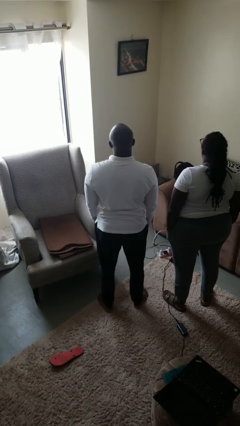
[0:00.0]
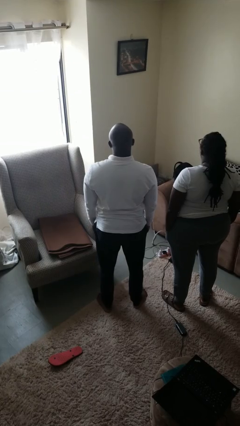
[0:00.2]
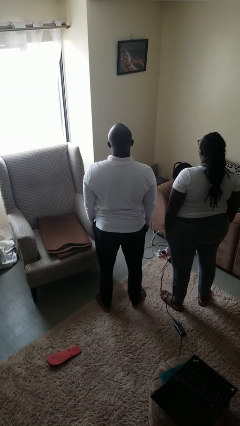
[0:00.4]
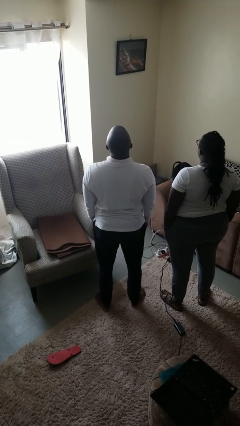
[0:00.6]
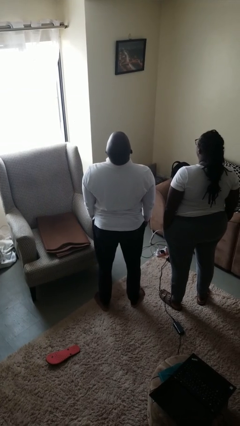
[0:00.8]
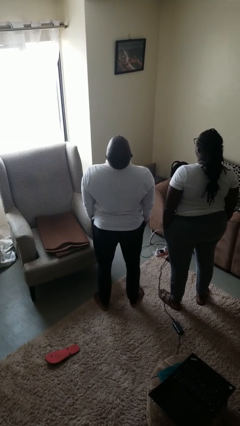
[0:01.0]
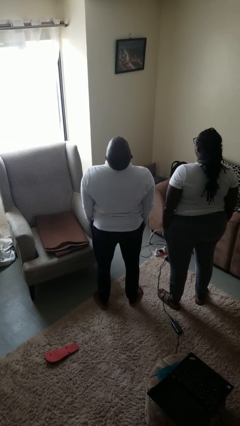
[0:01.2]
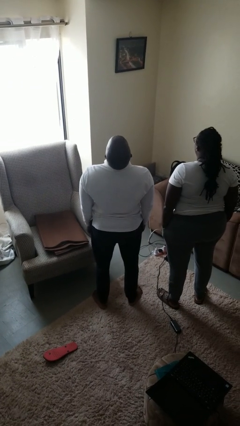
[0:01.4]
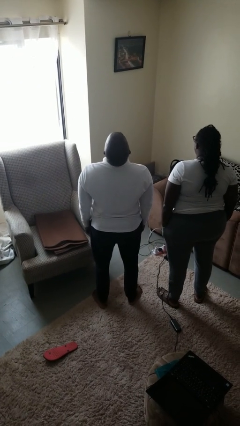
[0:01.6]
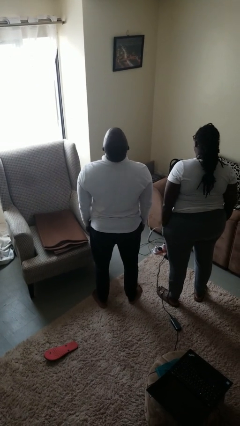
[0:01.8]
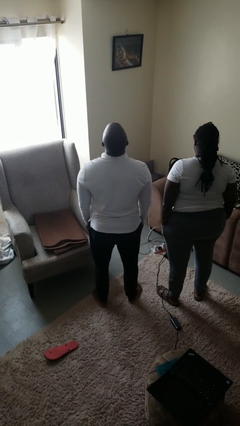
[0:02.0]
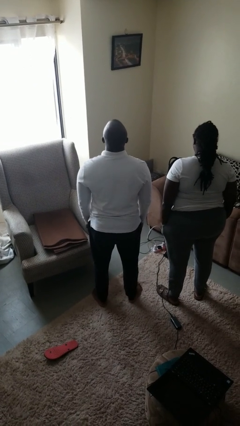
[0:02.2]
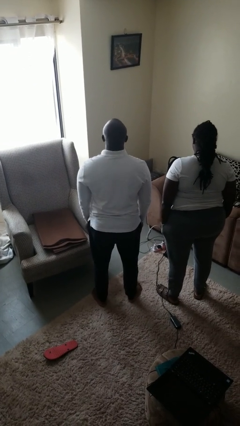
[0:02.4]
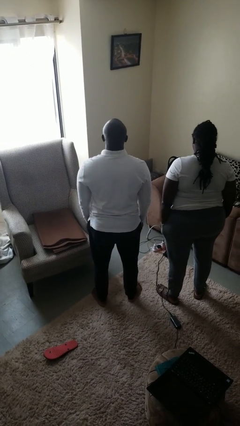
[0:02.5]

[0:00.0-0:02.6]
person laughs with person

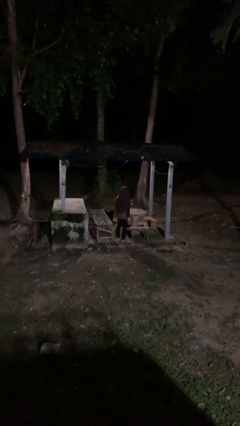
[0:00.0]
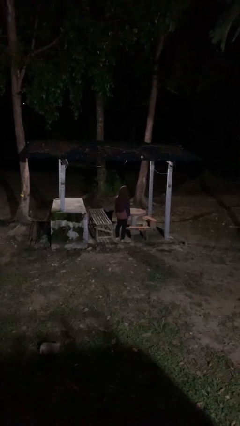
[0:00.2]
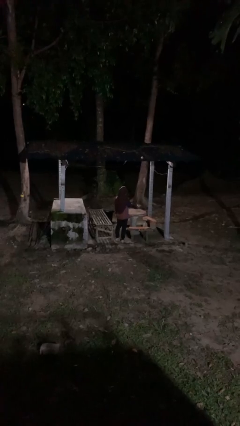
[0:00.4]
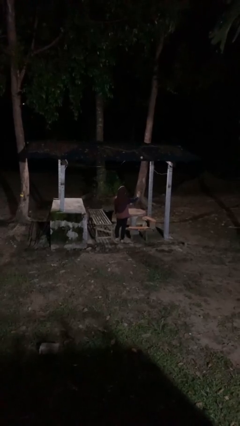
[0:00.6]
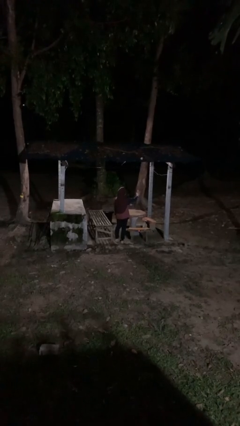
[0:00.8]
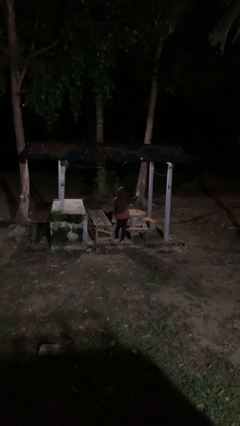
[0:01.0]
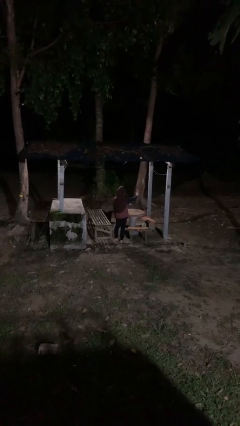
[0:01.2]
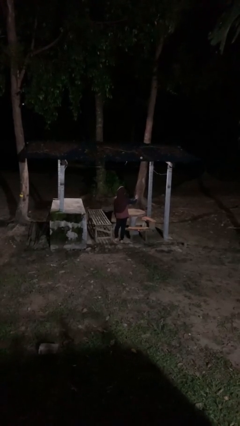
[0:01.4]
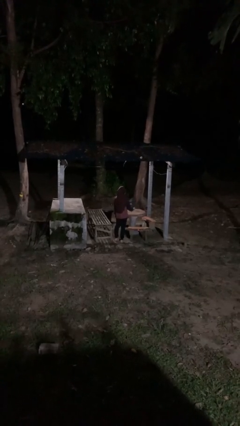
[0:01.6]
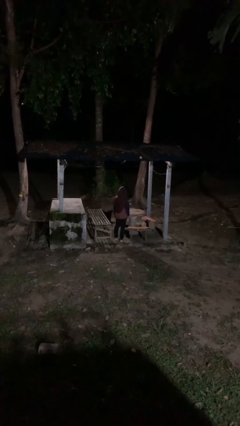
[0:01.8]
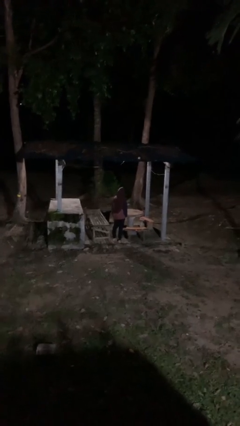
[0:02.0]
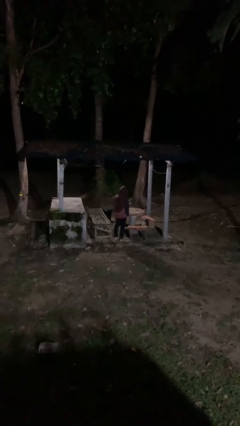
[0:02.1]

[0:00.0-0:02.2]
person gestures stop

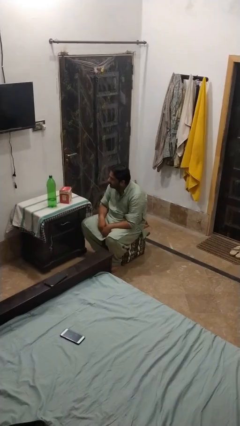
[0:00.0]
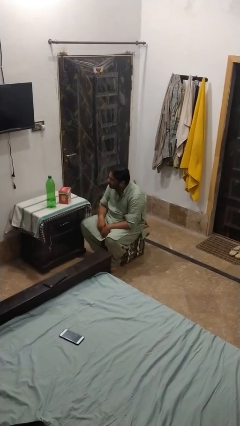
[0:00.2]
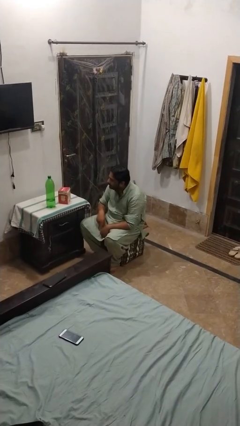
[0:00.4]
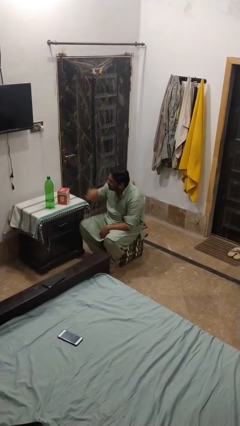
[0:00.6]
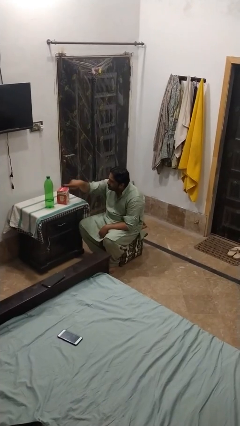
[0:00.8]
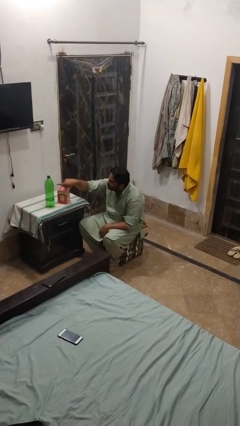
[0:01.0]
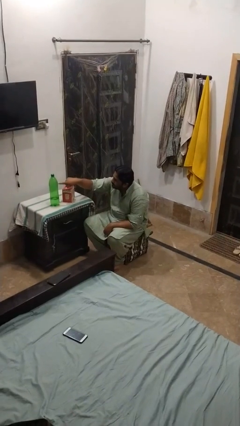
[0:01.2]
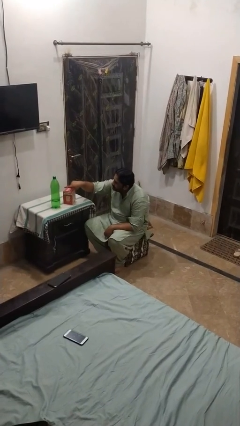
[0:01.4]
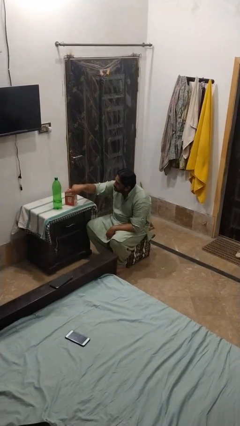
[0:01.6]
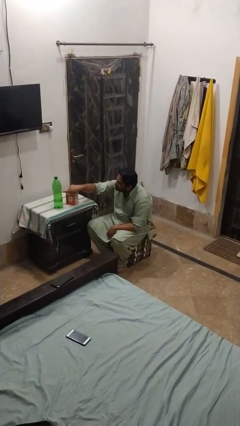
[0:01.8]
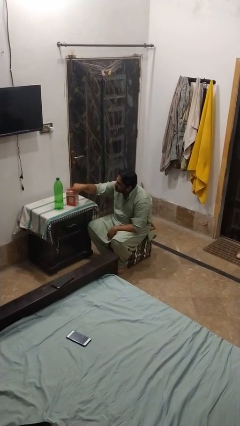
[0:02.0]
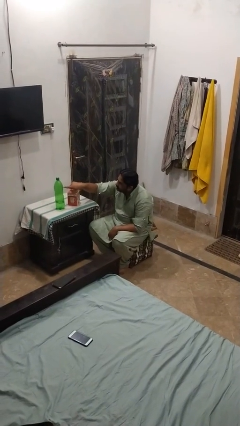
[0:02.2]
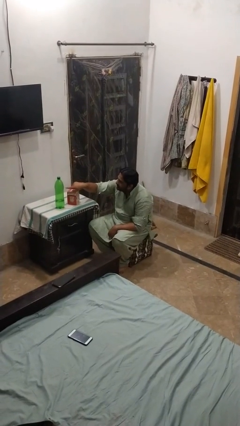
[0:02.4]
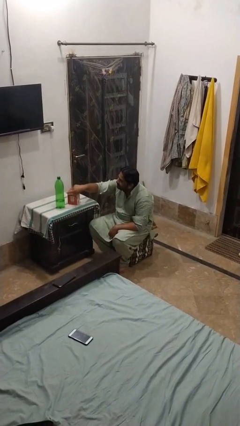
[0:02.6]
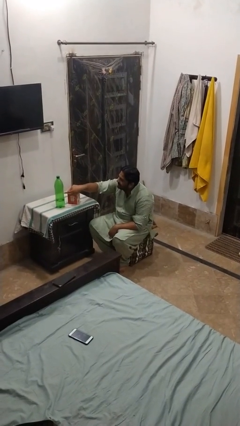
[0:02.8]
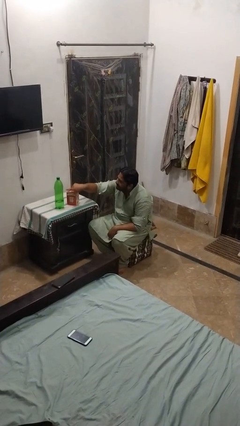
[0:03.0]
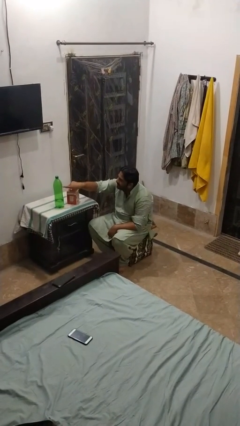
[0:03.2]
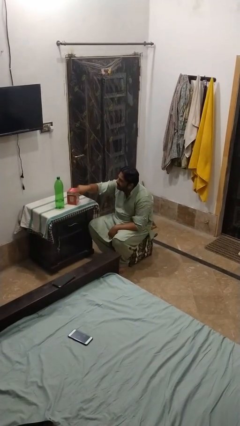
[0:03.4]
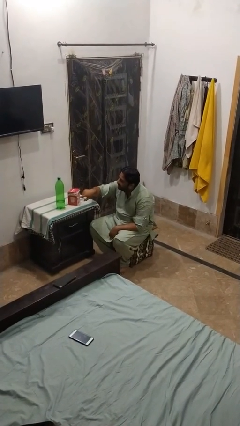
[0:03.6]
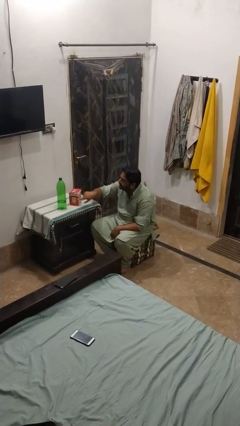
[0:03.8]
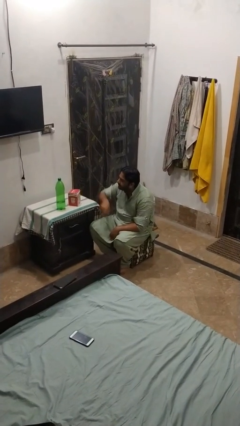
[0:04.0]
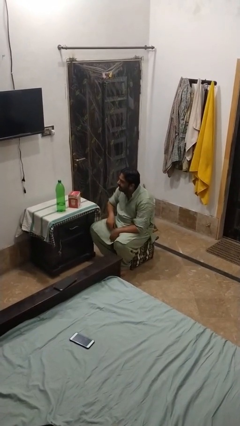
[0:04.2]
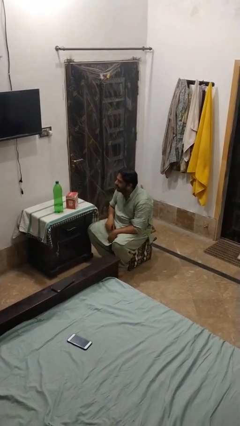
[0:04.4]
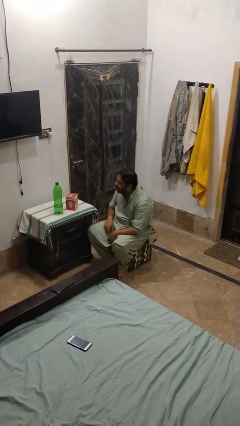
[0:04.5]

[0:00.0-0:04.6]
person taps object with finger

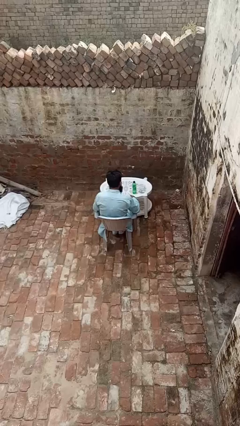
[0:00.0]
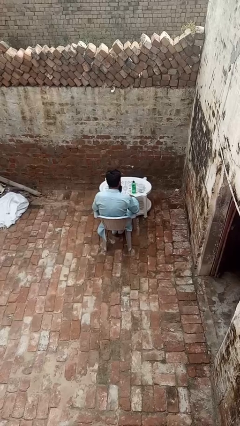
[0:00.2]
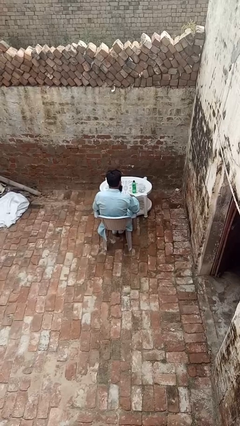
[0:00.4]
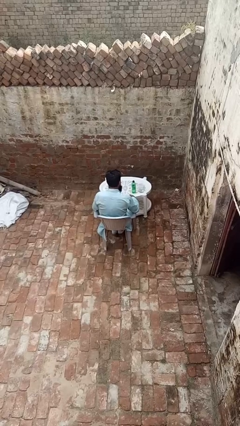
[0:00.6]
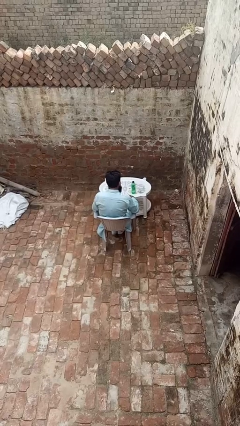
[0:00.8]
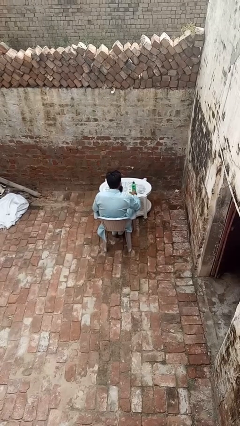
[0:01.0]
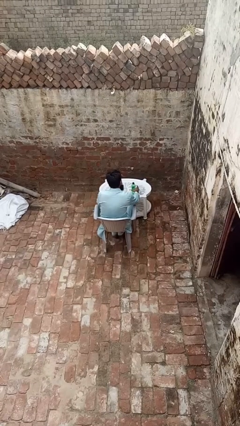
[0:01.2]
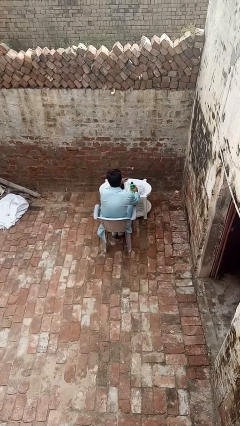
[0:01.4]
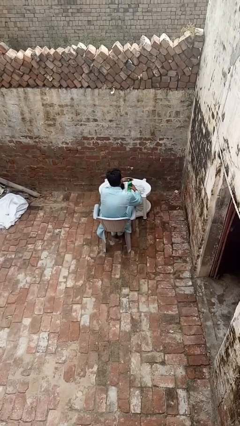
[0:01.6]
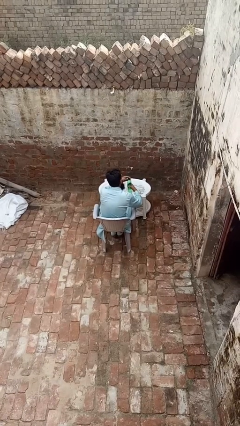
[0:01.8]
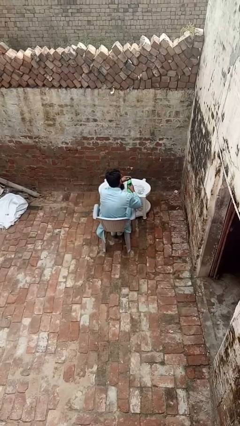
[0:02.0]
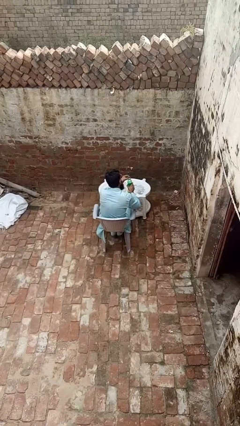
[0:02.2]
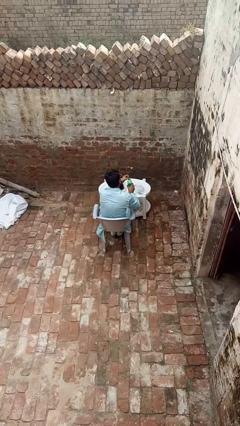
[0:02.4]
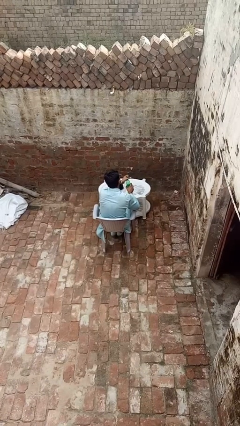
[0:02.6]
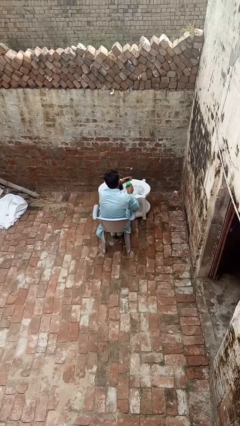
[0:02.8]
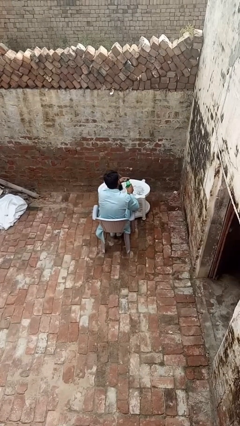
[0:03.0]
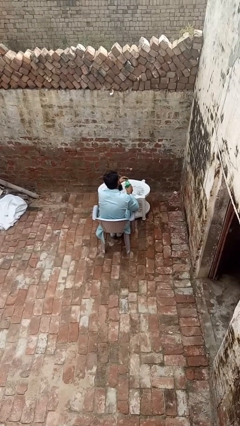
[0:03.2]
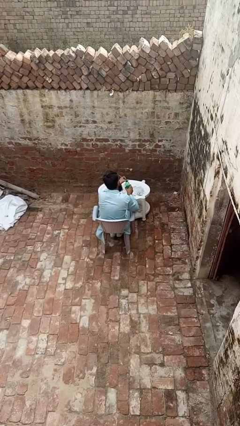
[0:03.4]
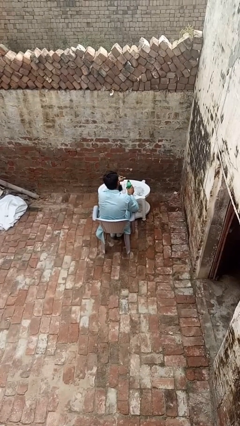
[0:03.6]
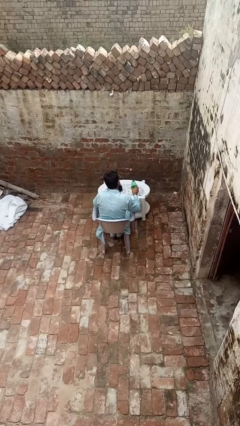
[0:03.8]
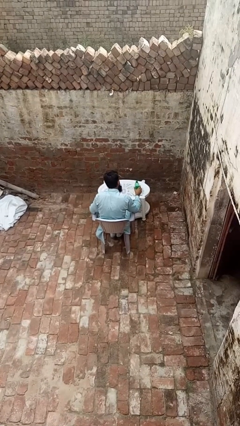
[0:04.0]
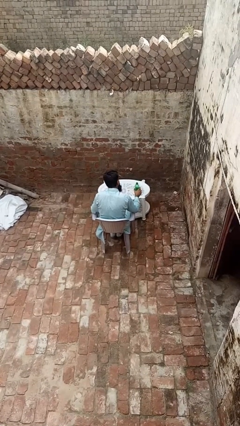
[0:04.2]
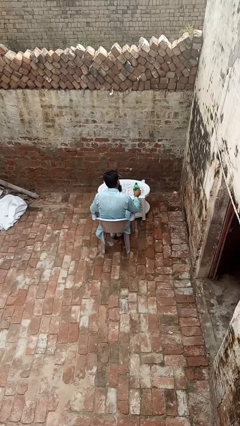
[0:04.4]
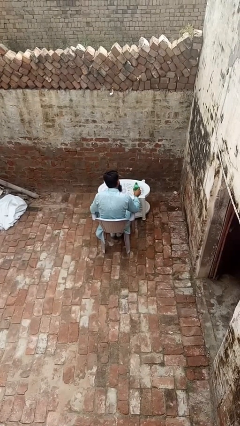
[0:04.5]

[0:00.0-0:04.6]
person unscrews lid from bottle

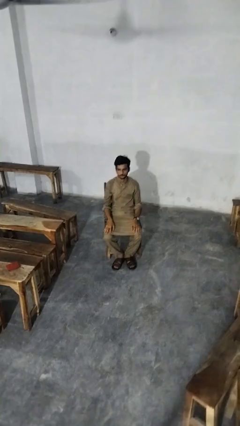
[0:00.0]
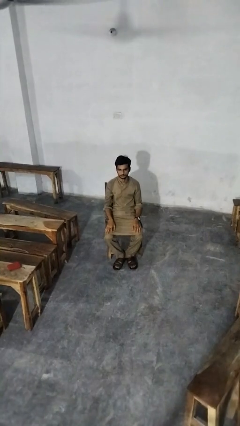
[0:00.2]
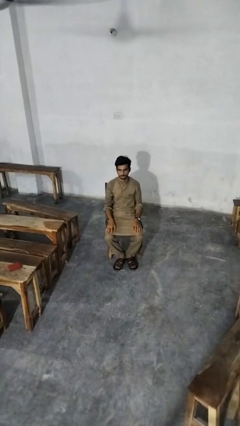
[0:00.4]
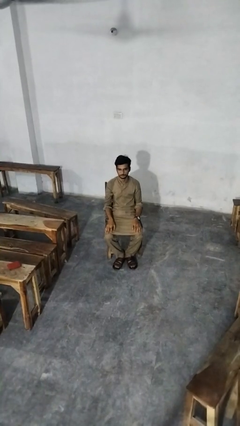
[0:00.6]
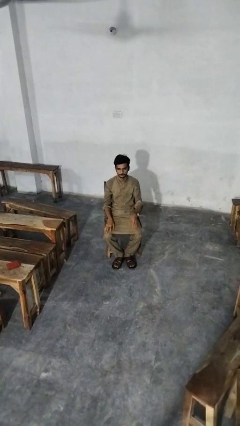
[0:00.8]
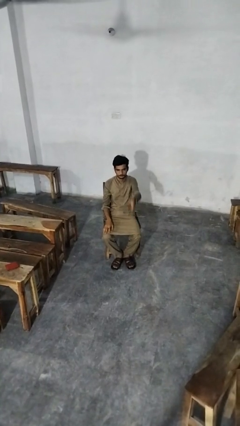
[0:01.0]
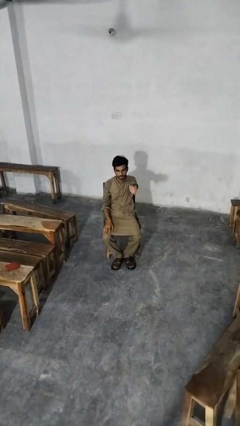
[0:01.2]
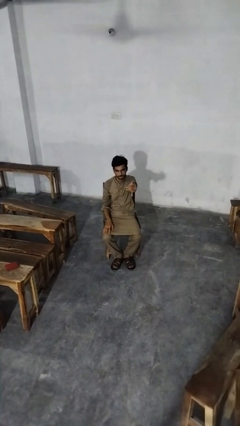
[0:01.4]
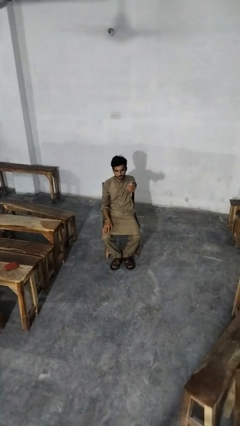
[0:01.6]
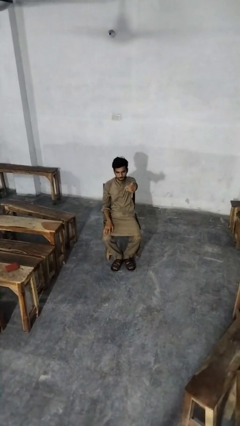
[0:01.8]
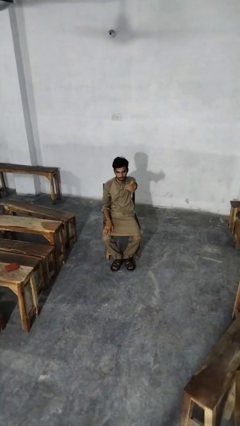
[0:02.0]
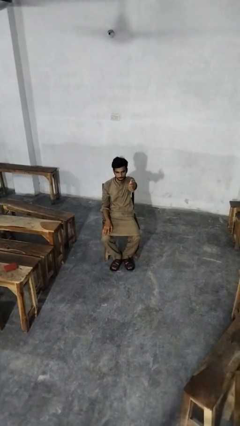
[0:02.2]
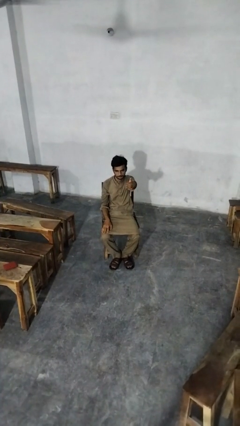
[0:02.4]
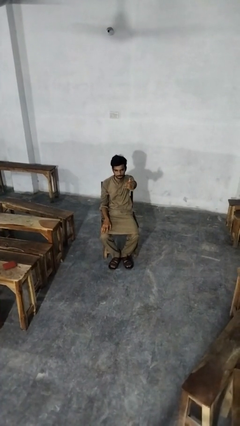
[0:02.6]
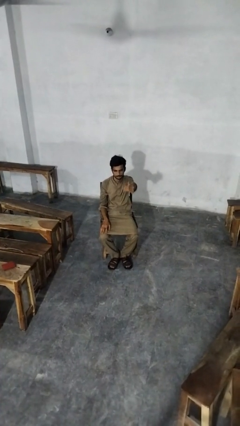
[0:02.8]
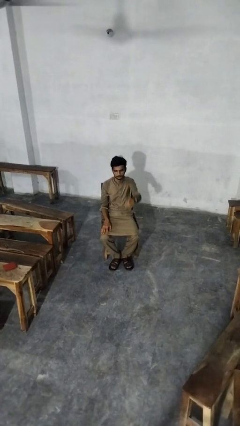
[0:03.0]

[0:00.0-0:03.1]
person gestures come here

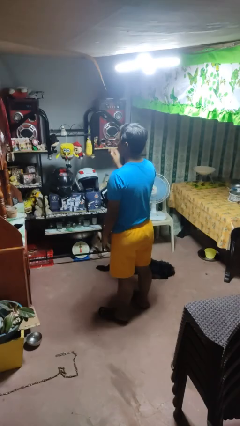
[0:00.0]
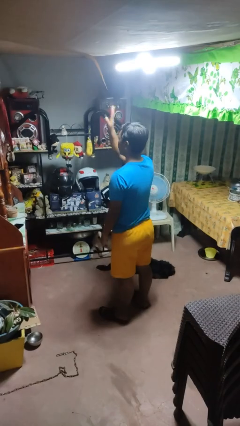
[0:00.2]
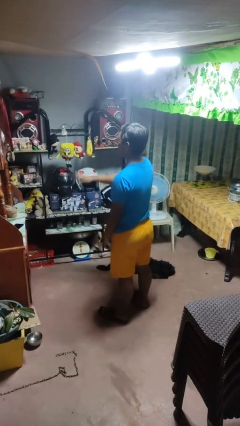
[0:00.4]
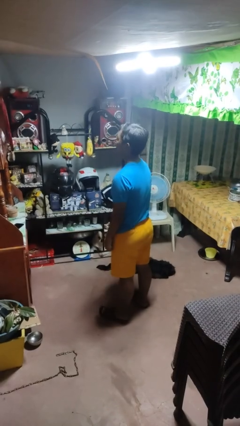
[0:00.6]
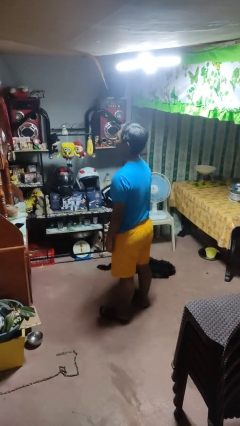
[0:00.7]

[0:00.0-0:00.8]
person gestures swipe down
